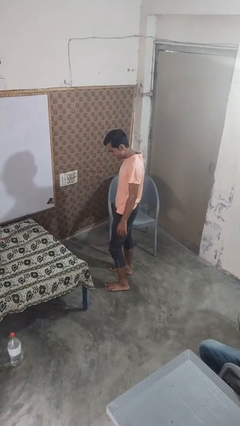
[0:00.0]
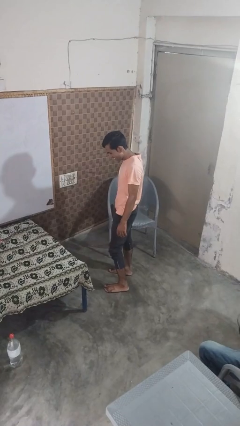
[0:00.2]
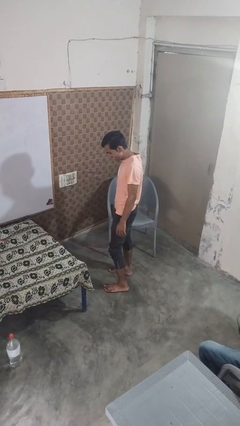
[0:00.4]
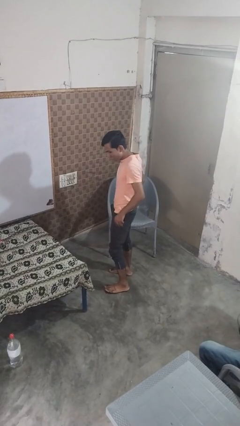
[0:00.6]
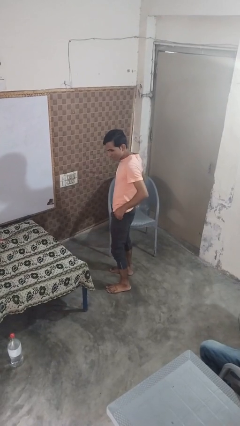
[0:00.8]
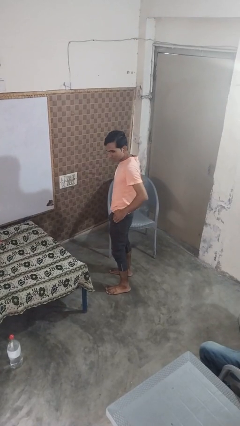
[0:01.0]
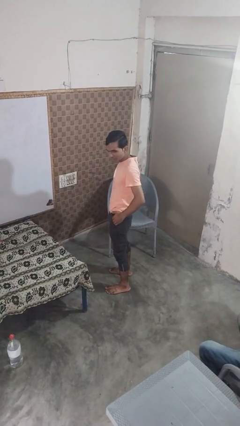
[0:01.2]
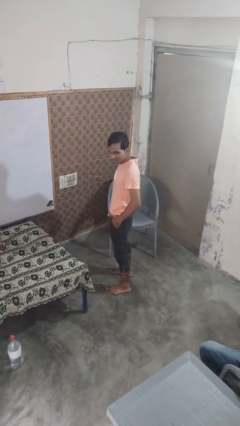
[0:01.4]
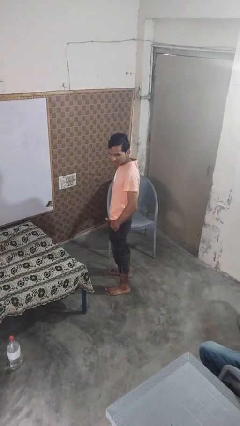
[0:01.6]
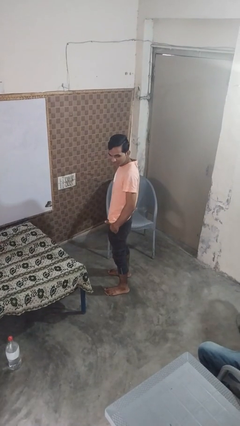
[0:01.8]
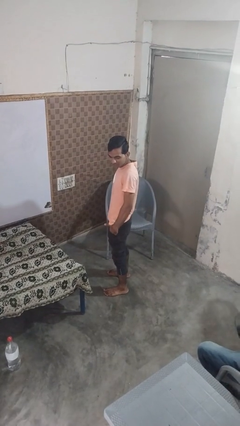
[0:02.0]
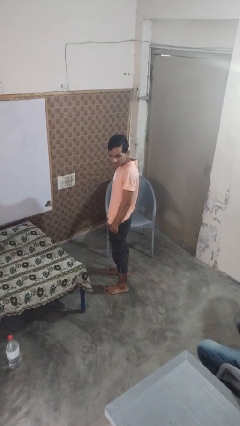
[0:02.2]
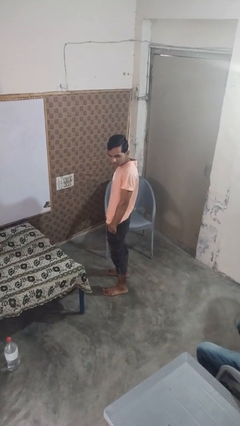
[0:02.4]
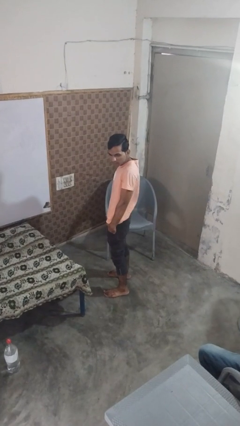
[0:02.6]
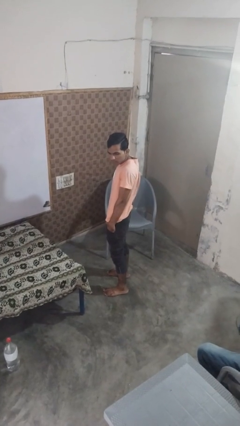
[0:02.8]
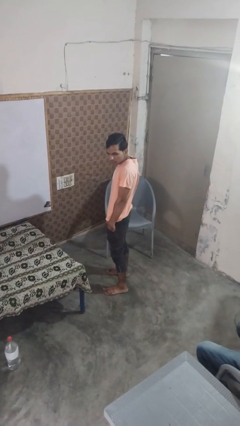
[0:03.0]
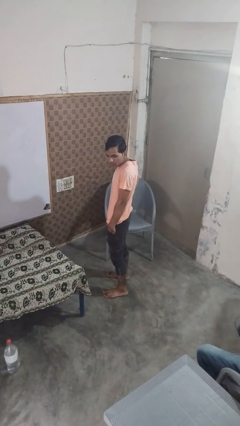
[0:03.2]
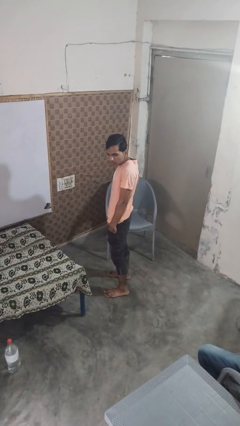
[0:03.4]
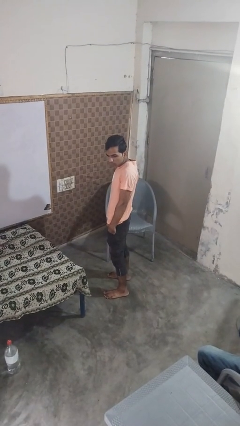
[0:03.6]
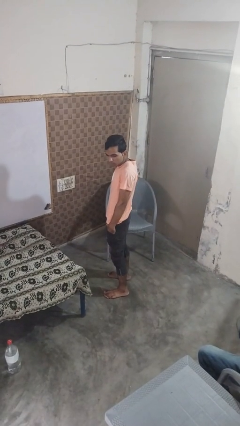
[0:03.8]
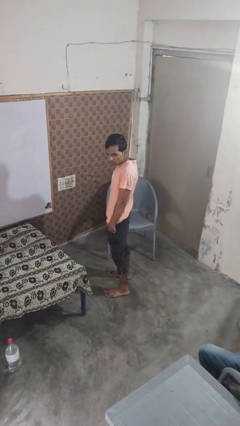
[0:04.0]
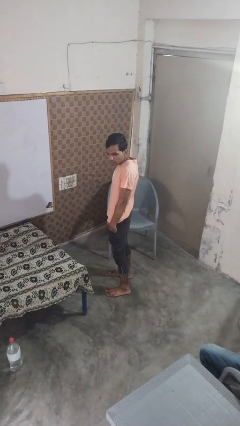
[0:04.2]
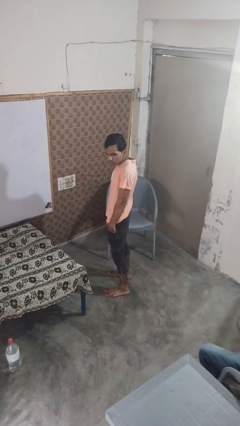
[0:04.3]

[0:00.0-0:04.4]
person puts hands in back pockets

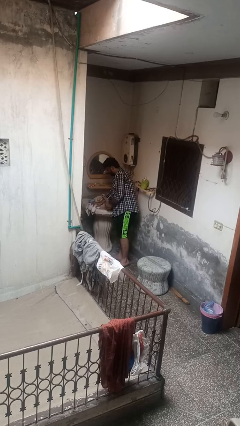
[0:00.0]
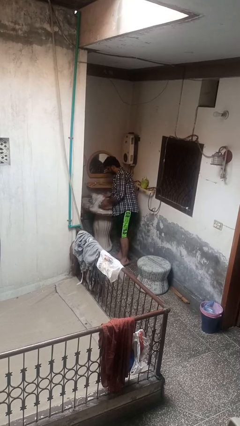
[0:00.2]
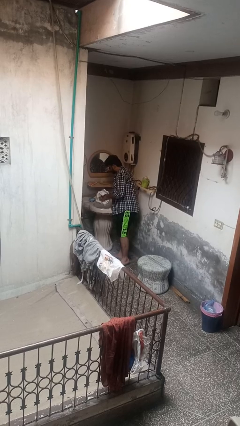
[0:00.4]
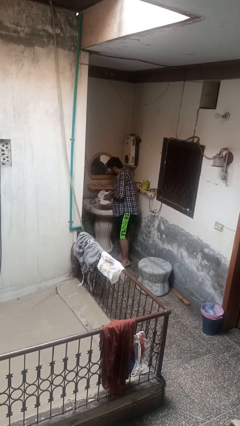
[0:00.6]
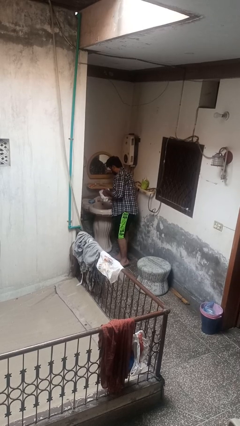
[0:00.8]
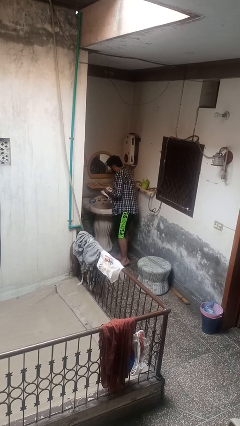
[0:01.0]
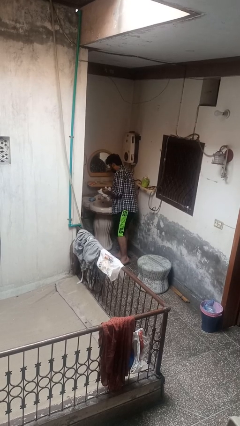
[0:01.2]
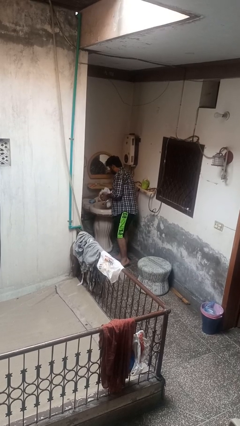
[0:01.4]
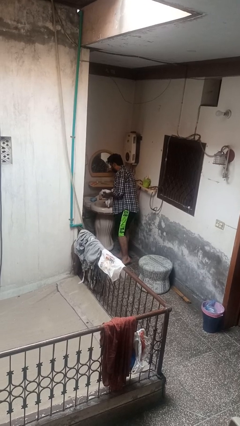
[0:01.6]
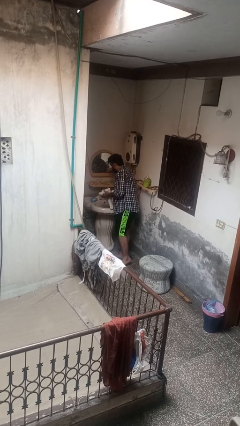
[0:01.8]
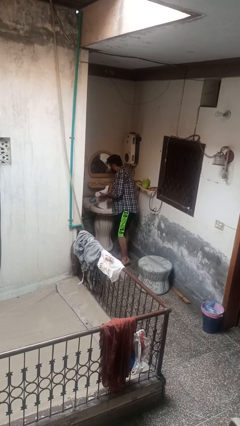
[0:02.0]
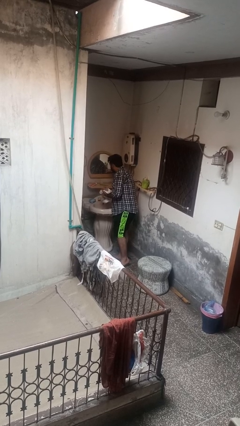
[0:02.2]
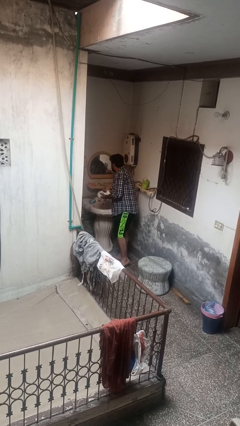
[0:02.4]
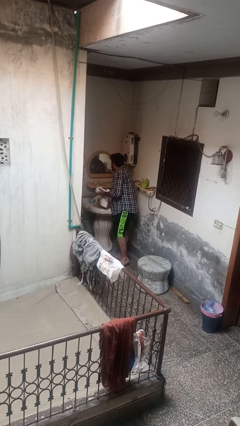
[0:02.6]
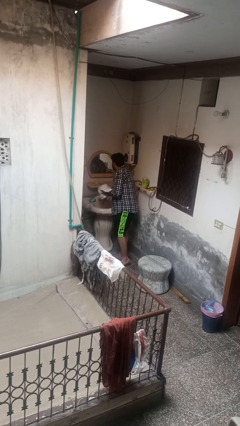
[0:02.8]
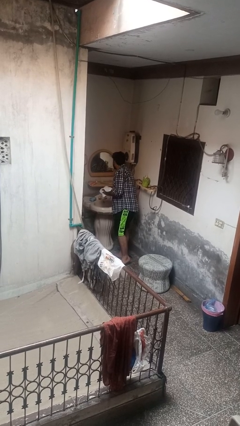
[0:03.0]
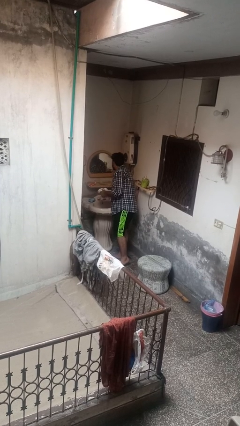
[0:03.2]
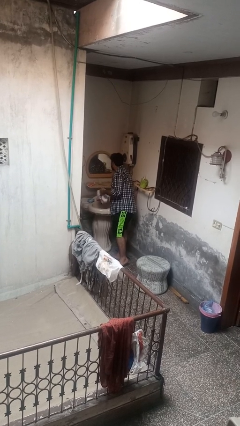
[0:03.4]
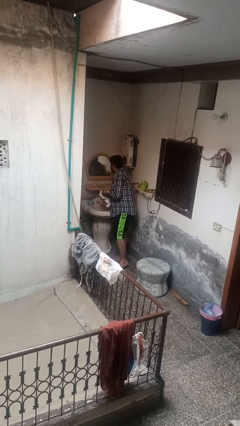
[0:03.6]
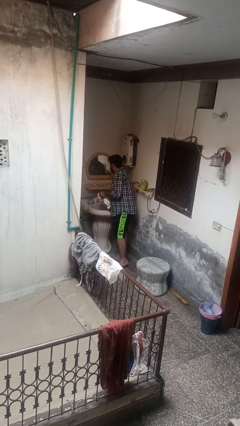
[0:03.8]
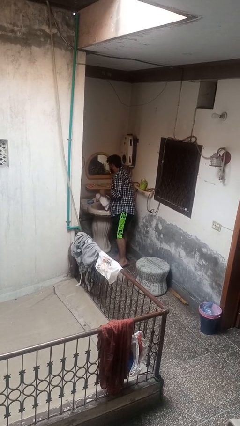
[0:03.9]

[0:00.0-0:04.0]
person dries hands with towel

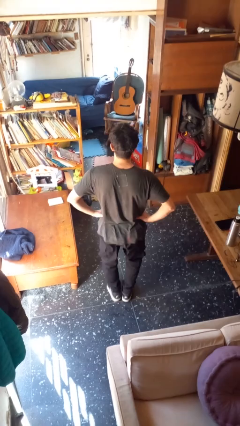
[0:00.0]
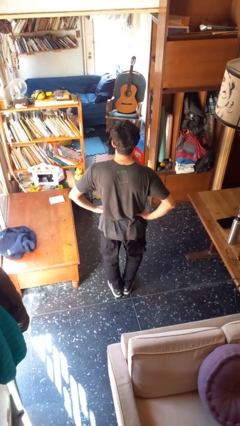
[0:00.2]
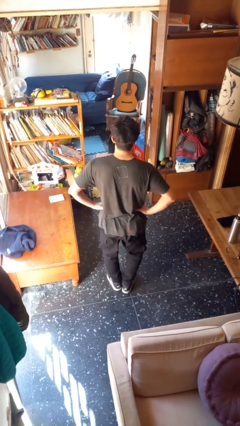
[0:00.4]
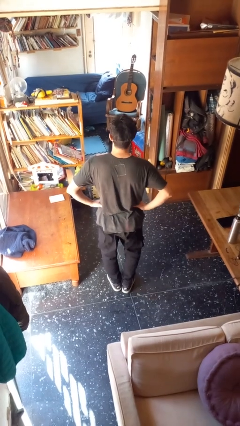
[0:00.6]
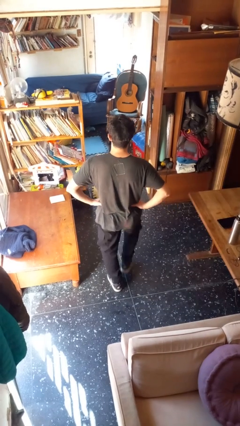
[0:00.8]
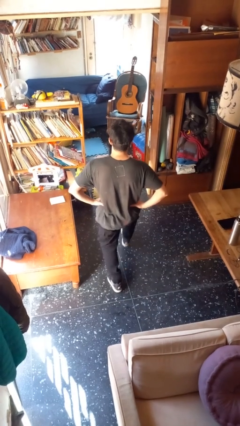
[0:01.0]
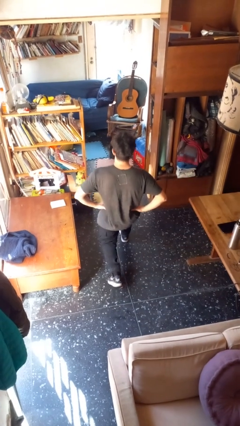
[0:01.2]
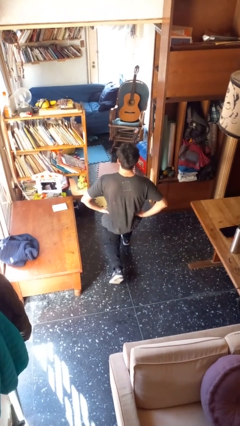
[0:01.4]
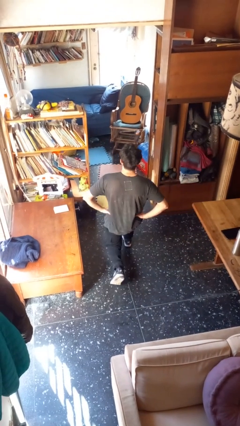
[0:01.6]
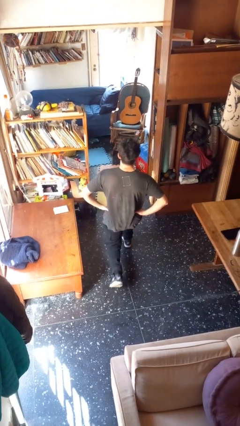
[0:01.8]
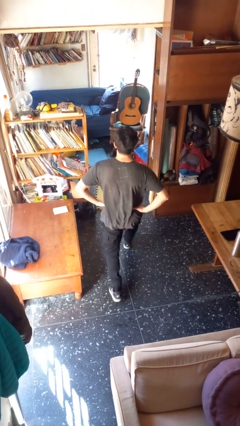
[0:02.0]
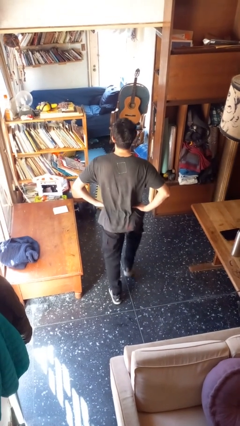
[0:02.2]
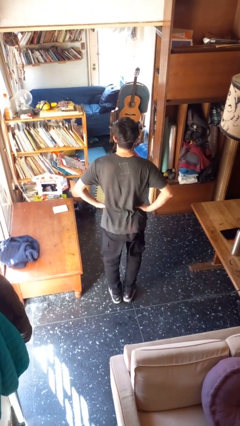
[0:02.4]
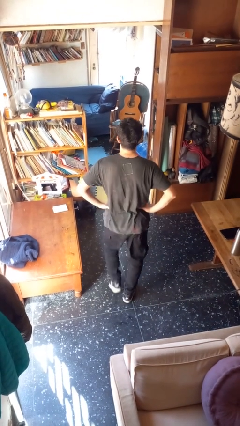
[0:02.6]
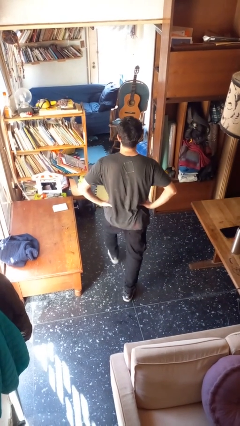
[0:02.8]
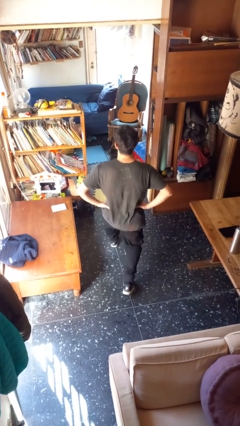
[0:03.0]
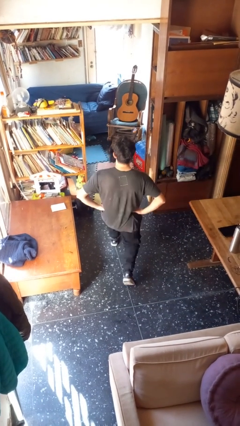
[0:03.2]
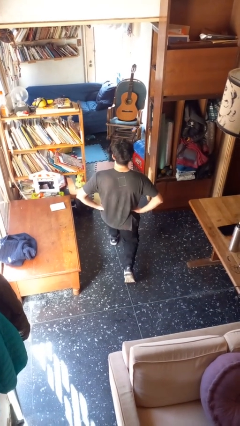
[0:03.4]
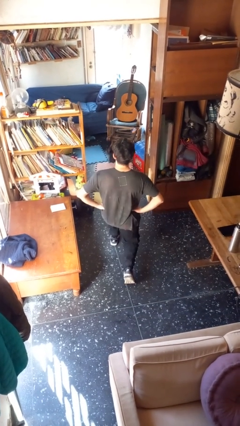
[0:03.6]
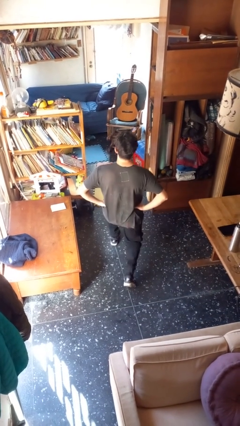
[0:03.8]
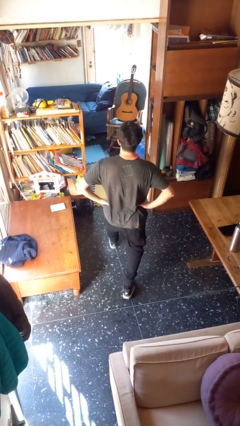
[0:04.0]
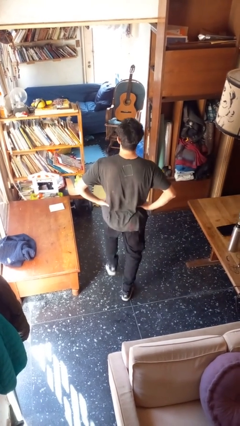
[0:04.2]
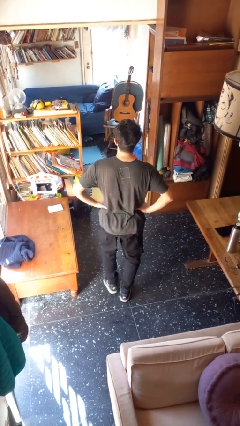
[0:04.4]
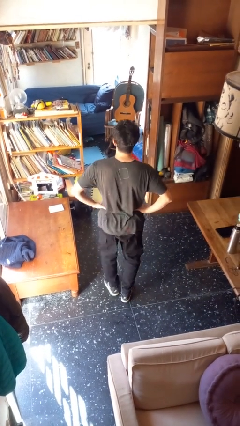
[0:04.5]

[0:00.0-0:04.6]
person exercises with lunges

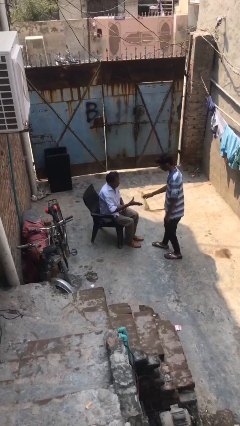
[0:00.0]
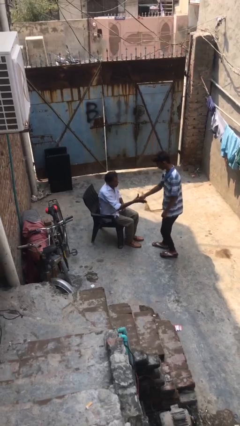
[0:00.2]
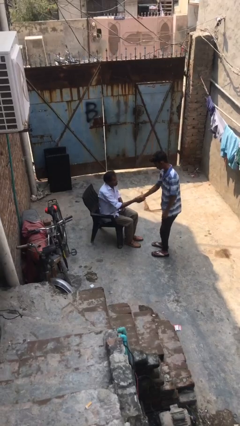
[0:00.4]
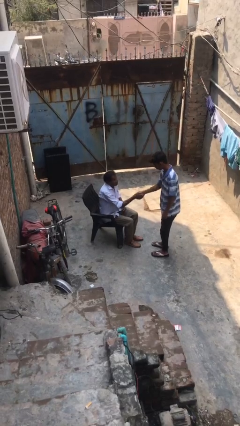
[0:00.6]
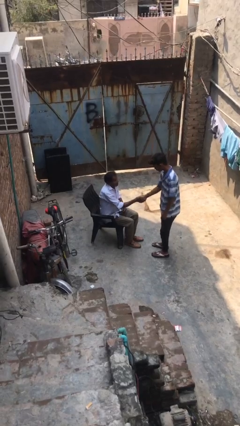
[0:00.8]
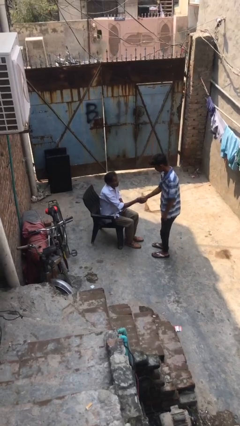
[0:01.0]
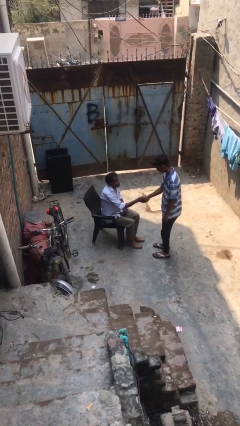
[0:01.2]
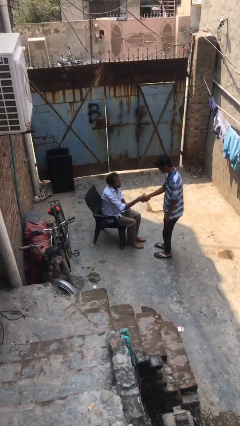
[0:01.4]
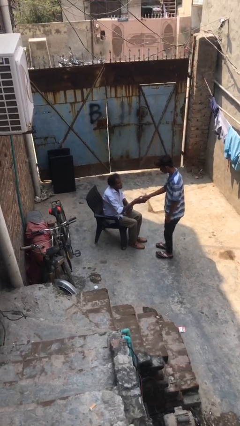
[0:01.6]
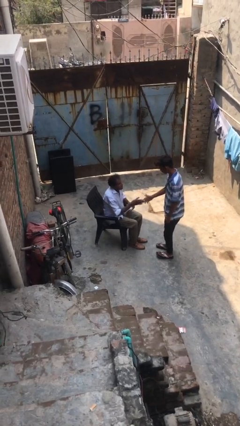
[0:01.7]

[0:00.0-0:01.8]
person shakes hand

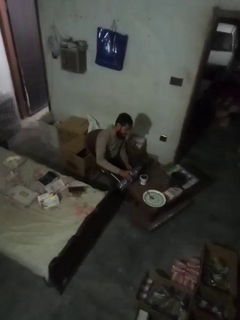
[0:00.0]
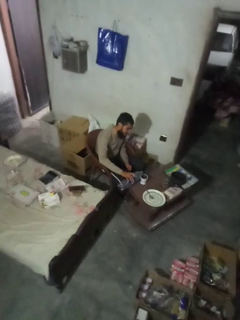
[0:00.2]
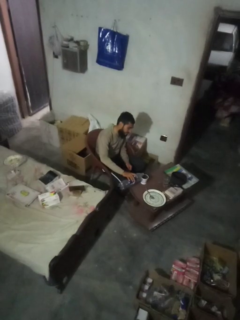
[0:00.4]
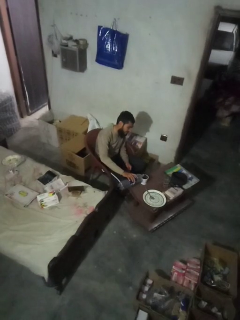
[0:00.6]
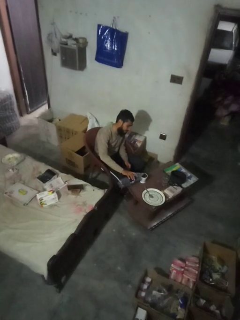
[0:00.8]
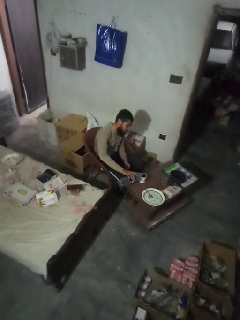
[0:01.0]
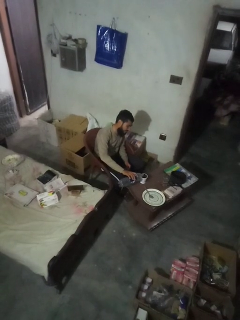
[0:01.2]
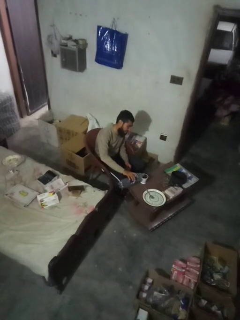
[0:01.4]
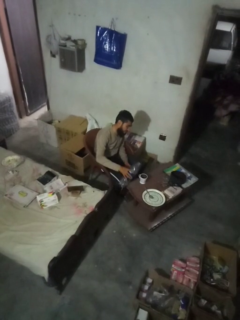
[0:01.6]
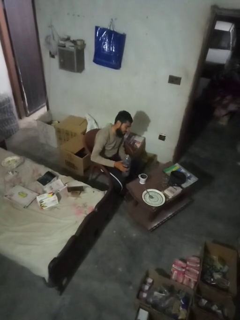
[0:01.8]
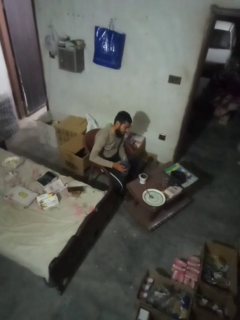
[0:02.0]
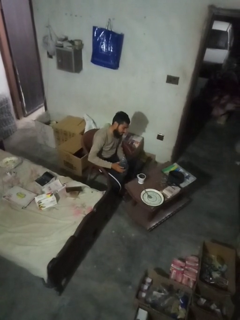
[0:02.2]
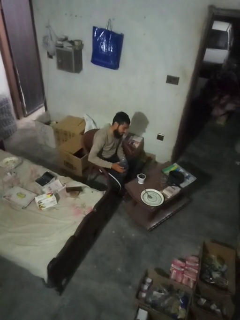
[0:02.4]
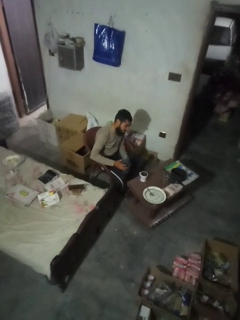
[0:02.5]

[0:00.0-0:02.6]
person pours liquid into cup

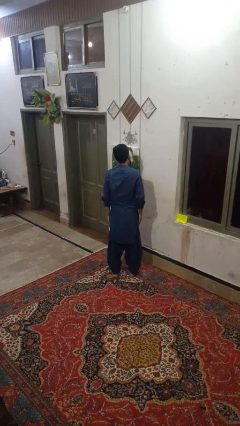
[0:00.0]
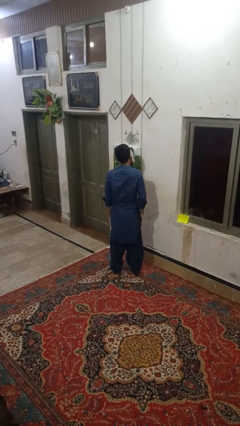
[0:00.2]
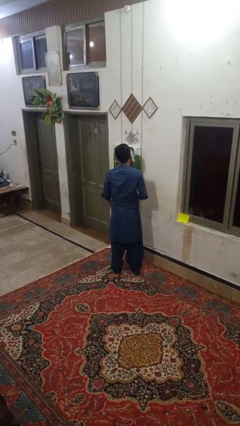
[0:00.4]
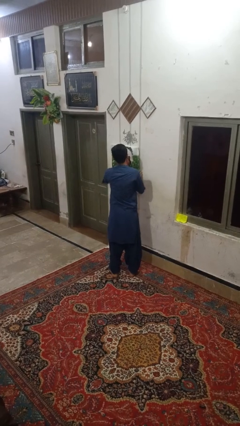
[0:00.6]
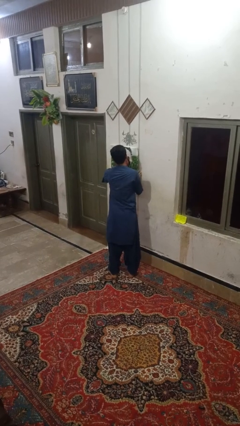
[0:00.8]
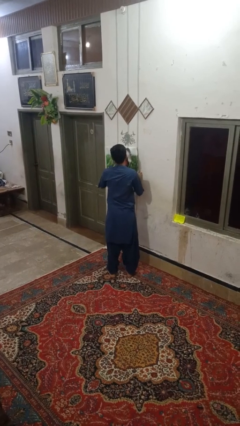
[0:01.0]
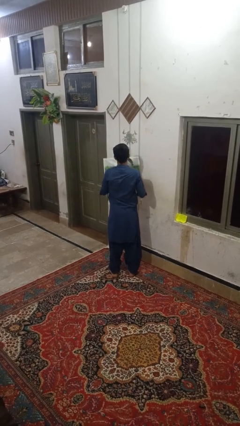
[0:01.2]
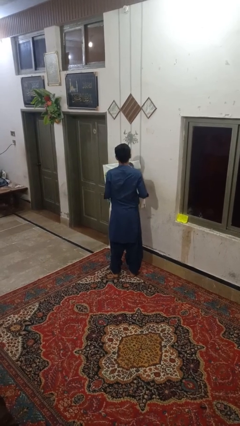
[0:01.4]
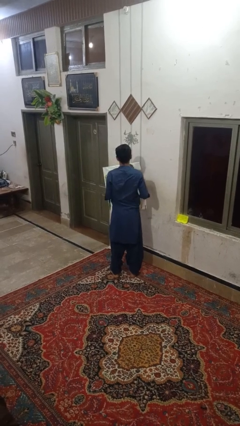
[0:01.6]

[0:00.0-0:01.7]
person takes down picture frame
